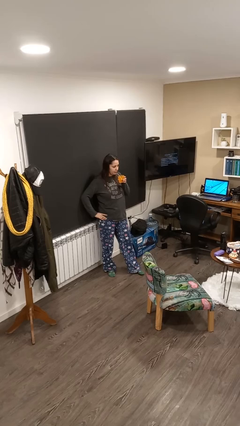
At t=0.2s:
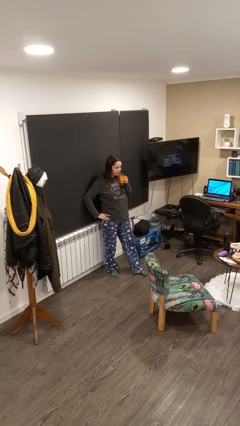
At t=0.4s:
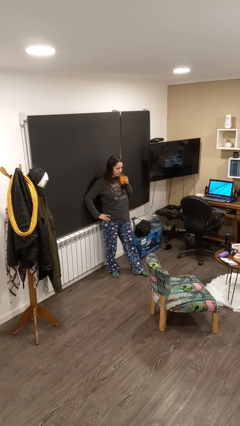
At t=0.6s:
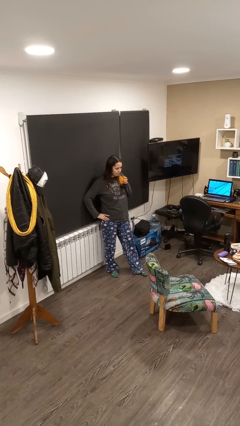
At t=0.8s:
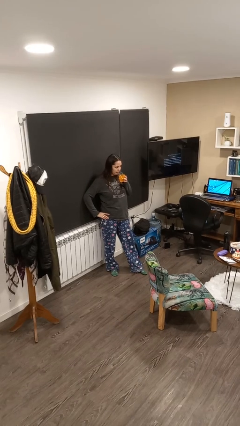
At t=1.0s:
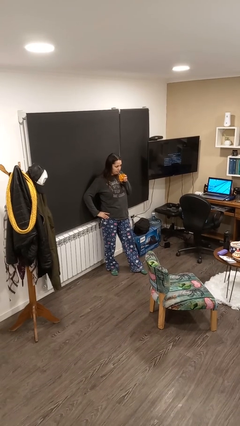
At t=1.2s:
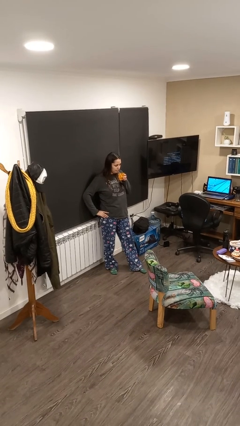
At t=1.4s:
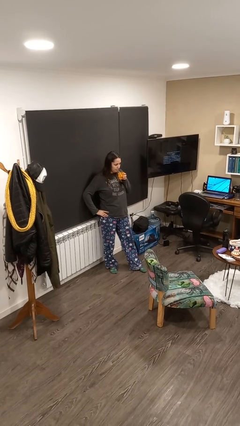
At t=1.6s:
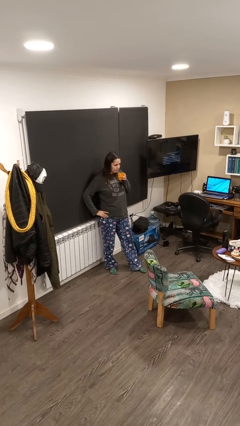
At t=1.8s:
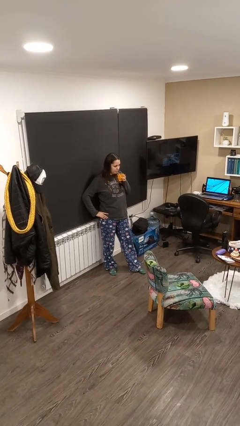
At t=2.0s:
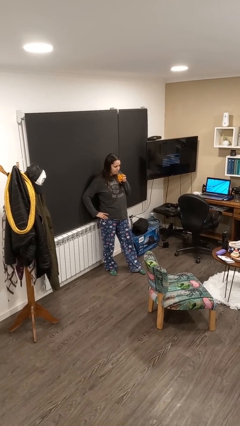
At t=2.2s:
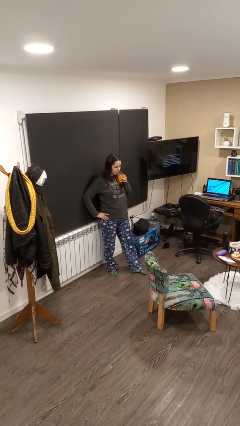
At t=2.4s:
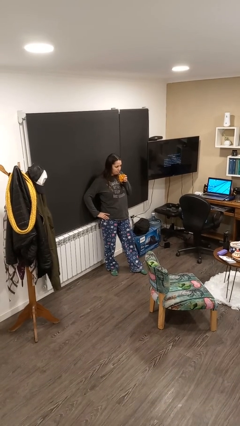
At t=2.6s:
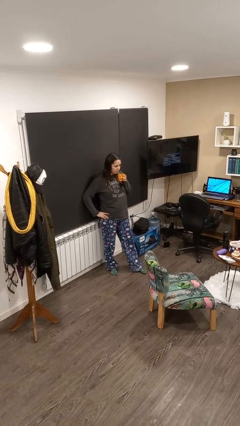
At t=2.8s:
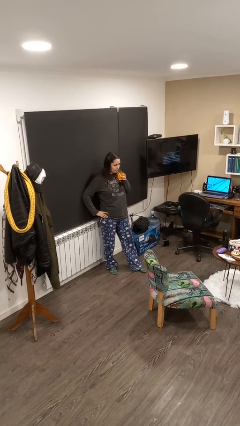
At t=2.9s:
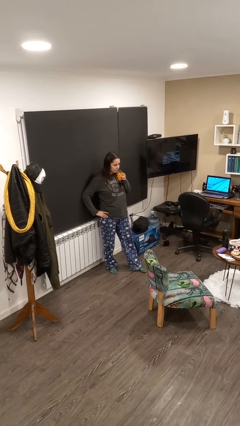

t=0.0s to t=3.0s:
person drinks from straw

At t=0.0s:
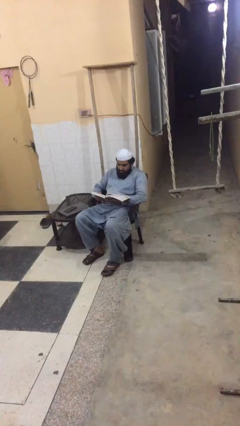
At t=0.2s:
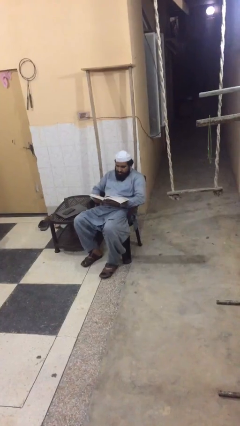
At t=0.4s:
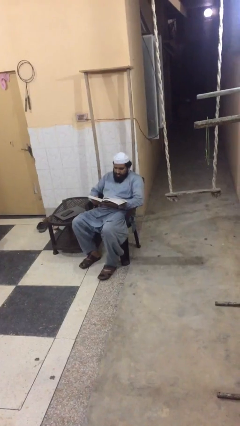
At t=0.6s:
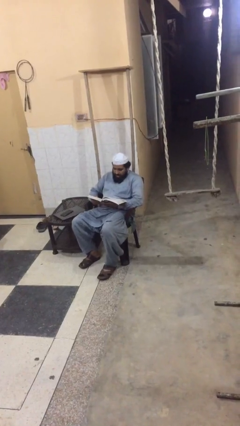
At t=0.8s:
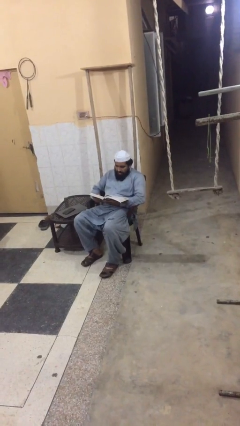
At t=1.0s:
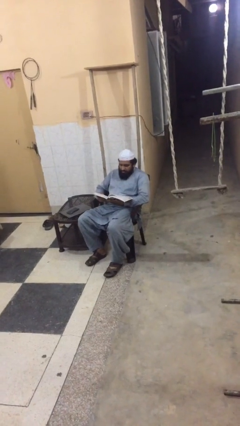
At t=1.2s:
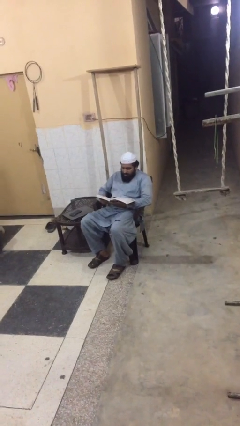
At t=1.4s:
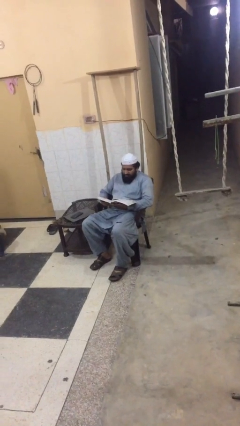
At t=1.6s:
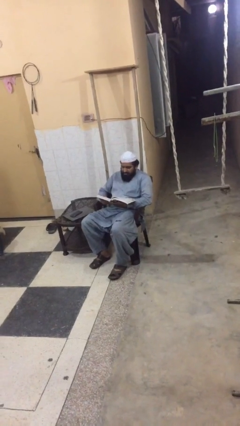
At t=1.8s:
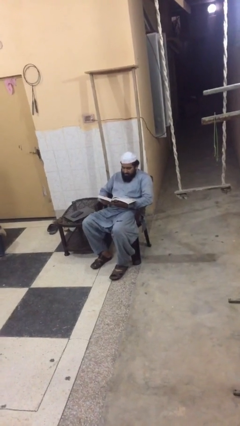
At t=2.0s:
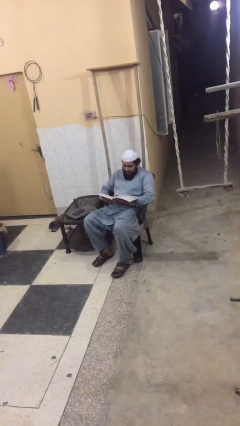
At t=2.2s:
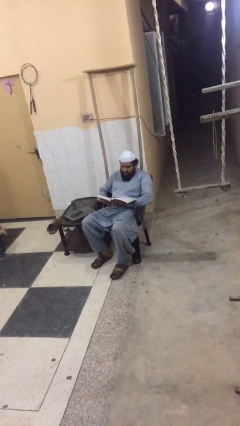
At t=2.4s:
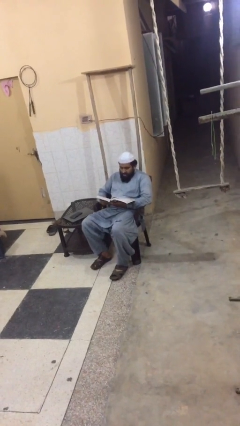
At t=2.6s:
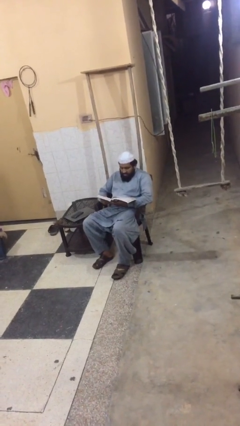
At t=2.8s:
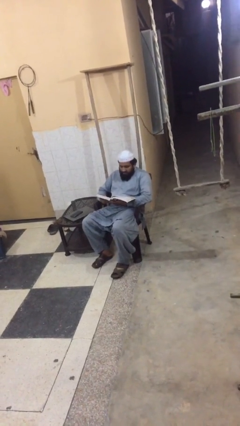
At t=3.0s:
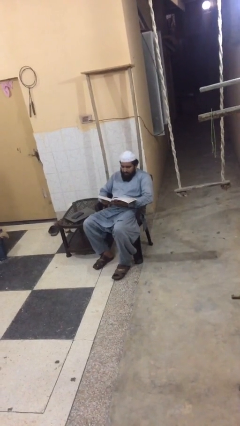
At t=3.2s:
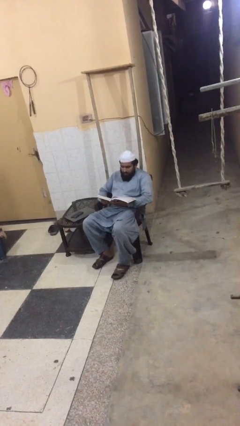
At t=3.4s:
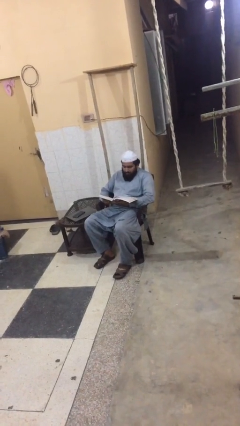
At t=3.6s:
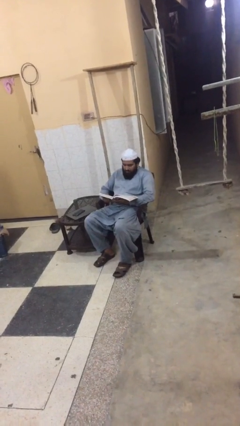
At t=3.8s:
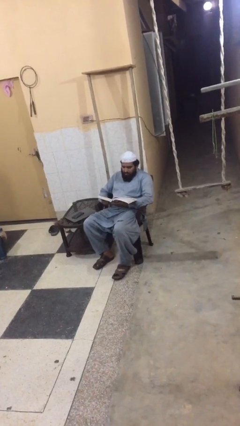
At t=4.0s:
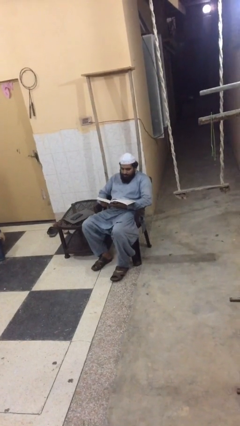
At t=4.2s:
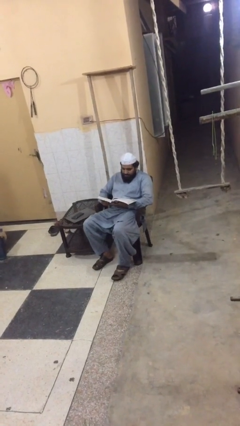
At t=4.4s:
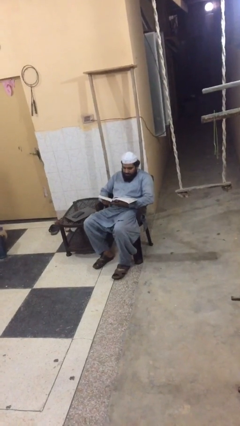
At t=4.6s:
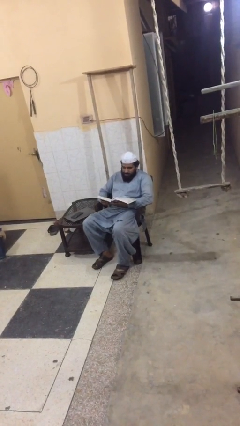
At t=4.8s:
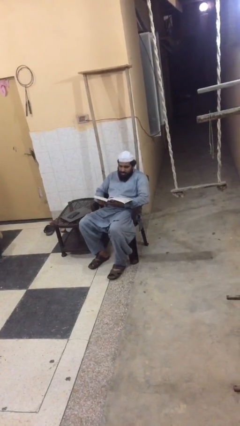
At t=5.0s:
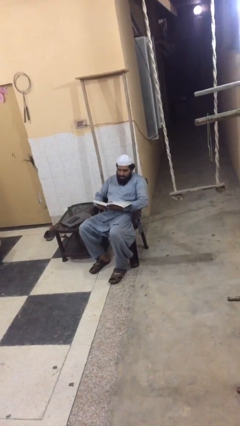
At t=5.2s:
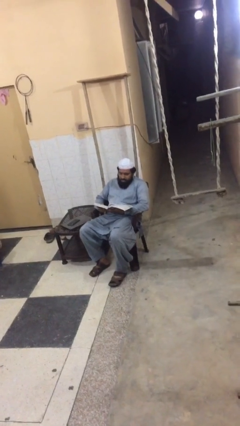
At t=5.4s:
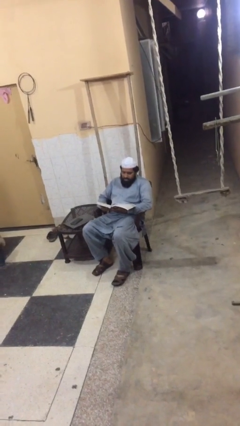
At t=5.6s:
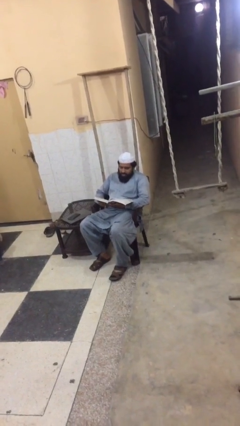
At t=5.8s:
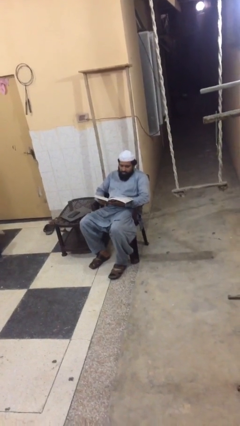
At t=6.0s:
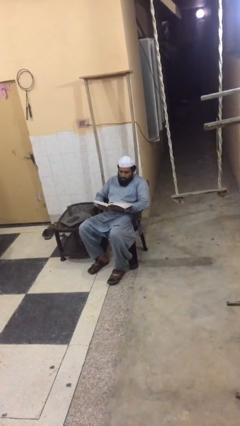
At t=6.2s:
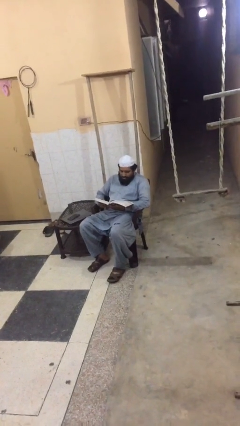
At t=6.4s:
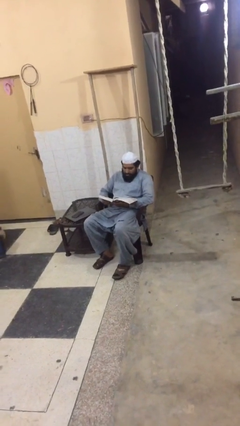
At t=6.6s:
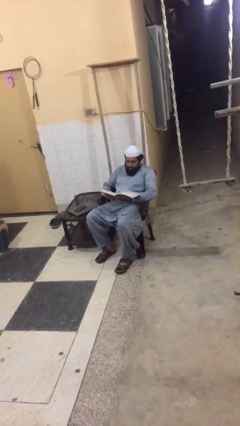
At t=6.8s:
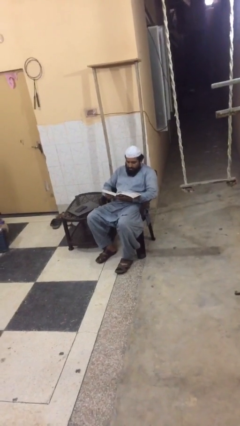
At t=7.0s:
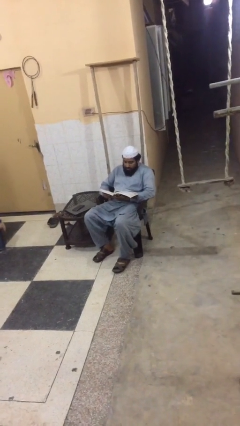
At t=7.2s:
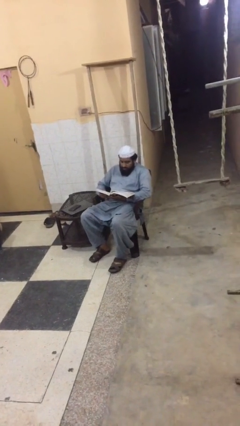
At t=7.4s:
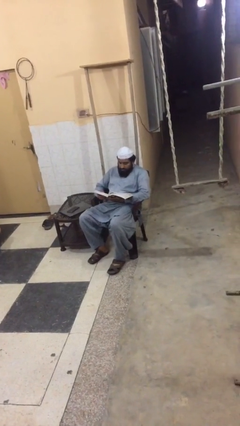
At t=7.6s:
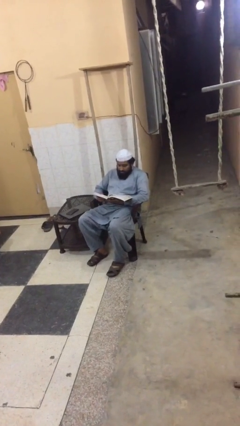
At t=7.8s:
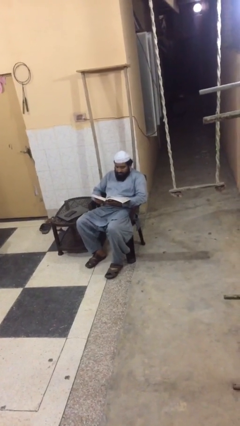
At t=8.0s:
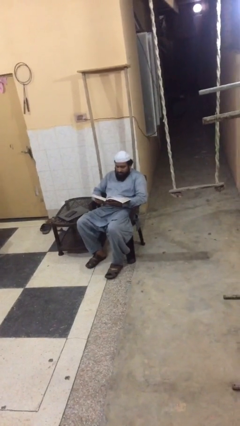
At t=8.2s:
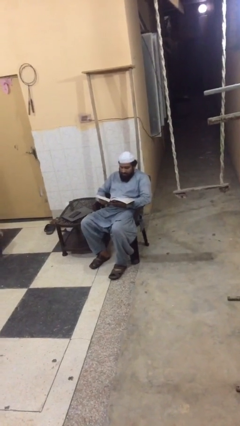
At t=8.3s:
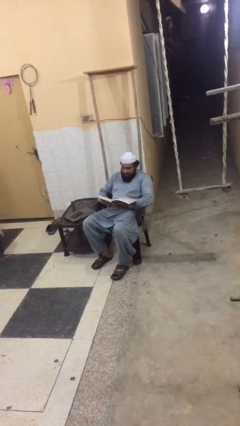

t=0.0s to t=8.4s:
person reads document

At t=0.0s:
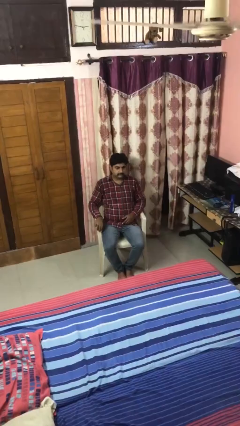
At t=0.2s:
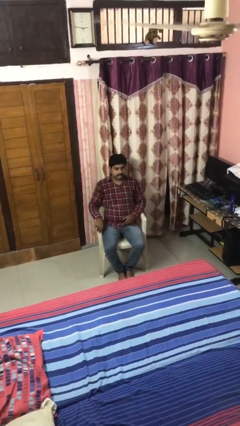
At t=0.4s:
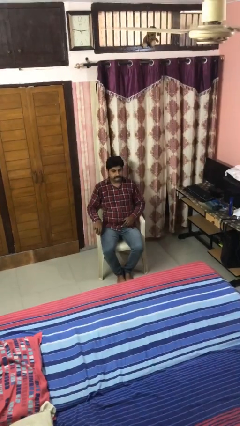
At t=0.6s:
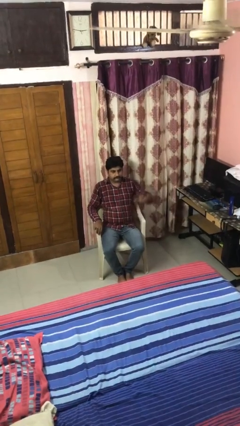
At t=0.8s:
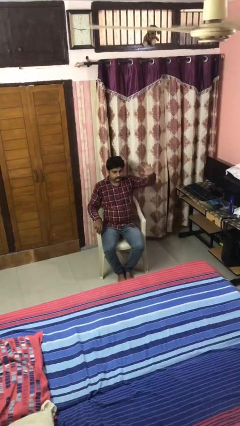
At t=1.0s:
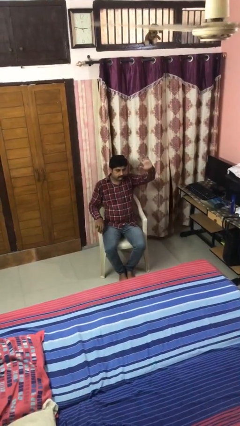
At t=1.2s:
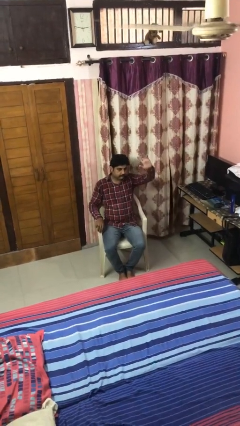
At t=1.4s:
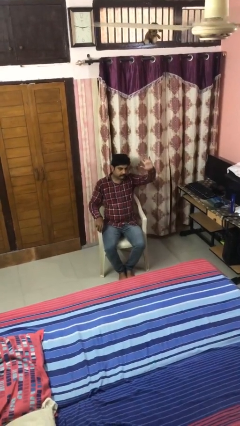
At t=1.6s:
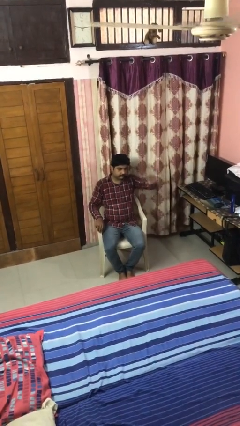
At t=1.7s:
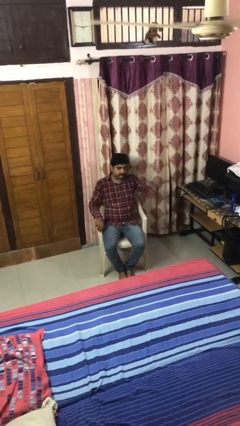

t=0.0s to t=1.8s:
person gestures raise hand

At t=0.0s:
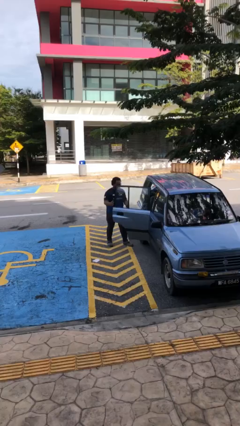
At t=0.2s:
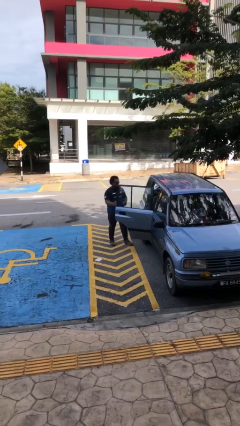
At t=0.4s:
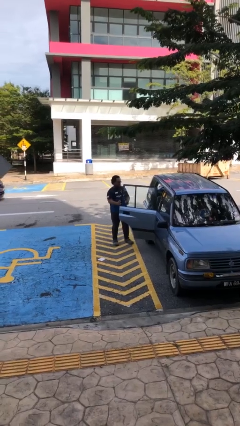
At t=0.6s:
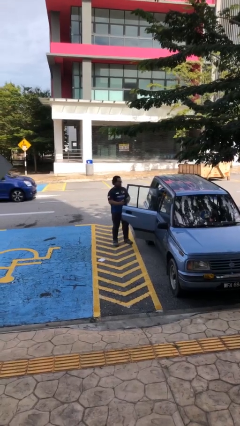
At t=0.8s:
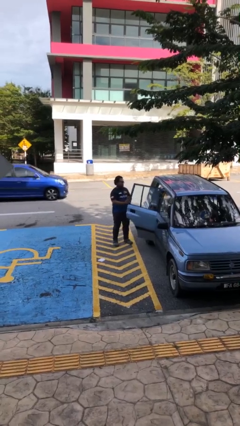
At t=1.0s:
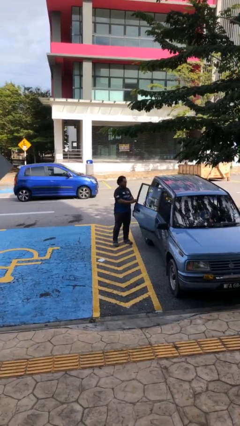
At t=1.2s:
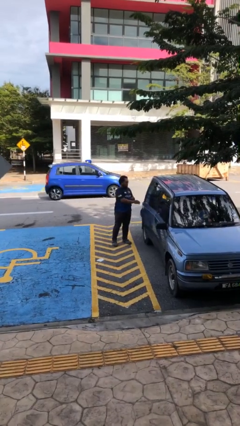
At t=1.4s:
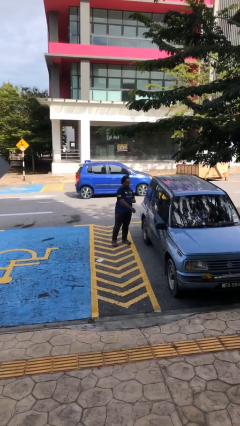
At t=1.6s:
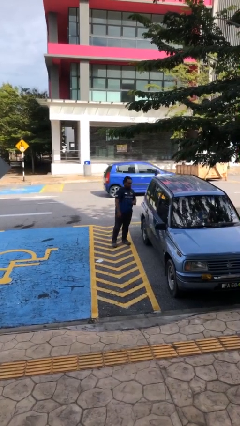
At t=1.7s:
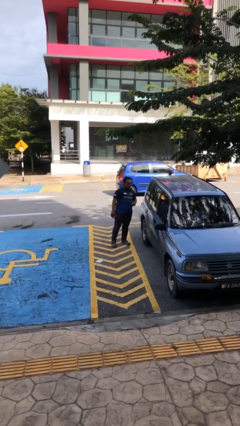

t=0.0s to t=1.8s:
person closes car door

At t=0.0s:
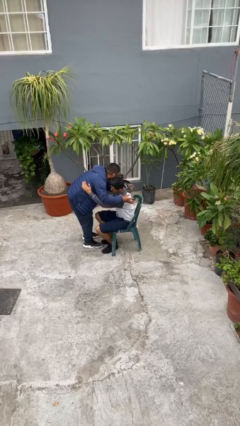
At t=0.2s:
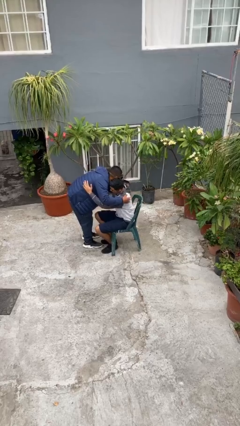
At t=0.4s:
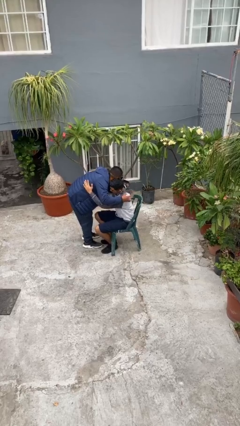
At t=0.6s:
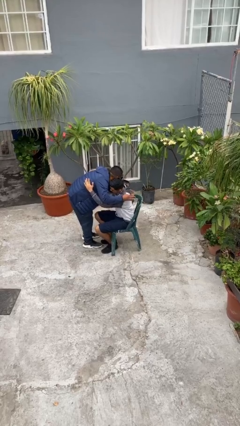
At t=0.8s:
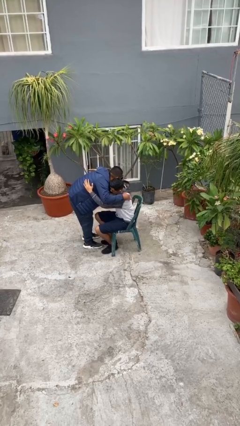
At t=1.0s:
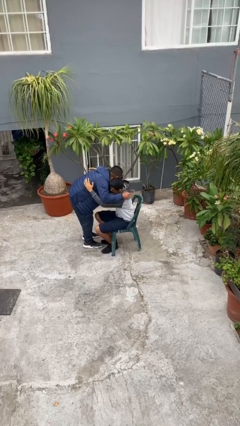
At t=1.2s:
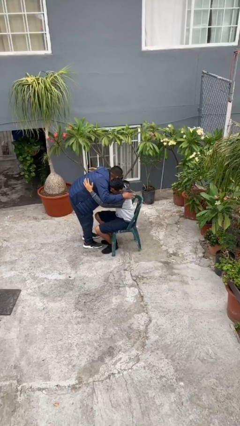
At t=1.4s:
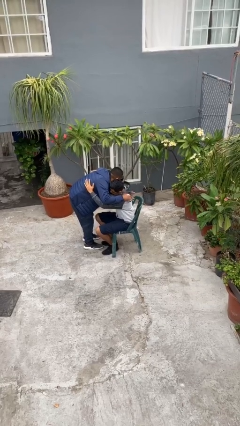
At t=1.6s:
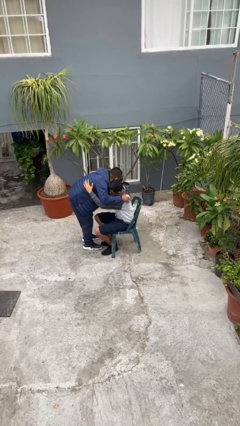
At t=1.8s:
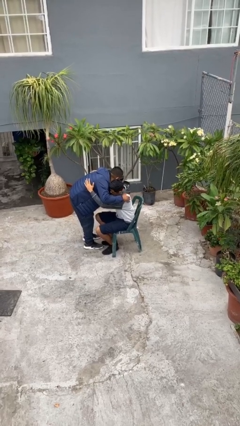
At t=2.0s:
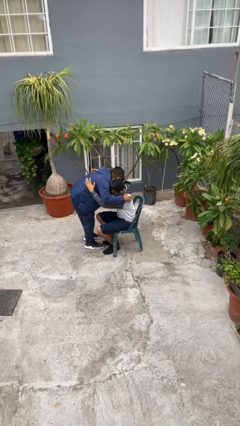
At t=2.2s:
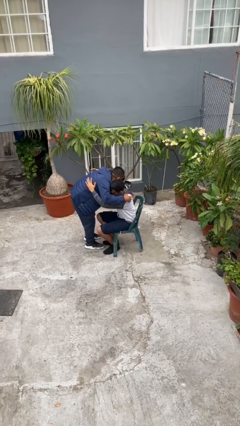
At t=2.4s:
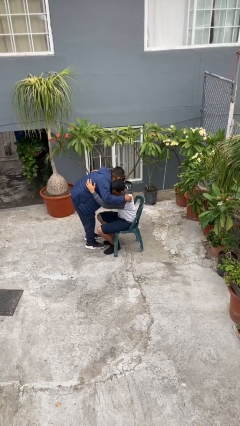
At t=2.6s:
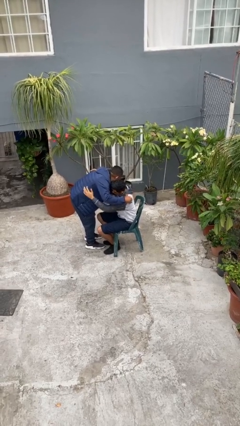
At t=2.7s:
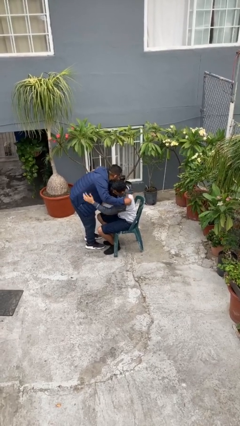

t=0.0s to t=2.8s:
person embraces person

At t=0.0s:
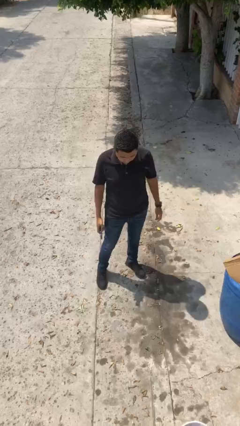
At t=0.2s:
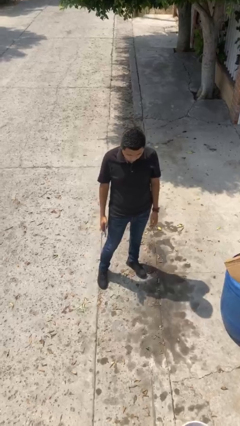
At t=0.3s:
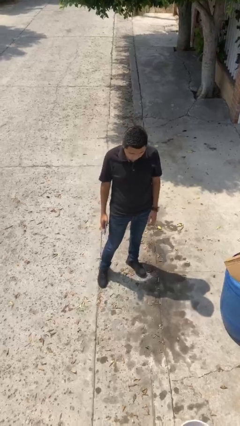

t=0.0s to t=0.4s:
person texts on phone
